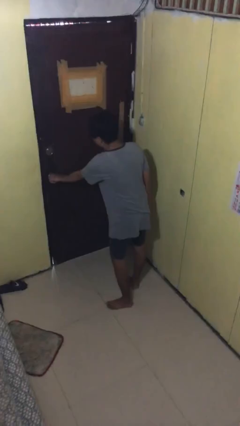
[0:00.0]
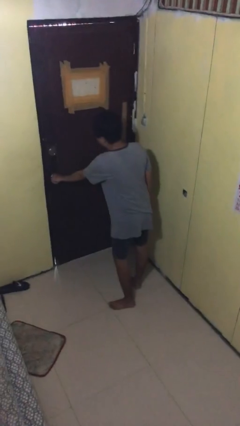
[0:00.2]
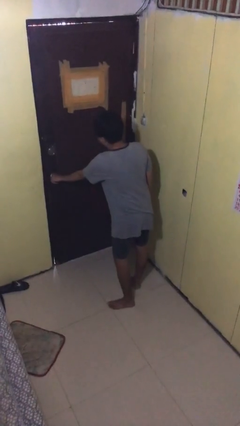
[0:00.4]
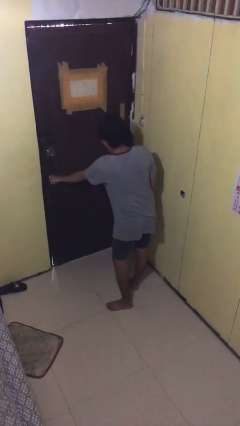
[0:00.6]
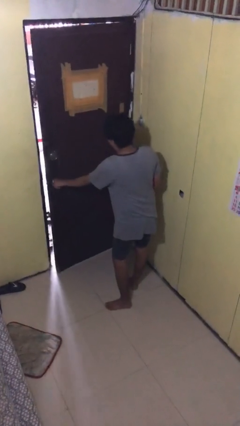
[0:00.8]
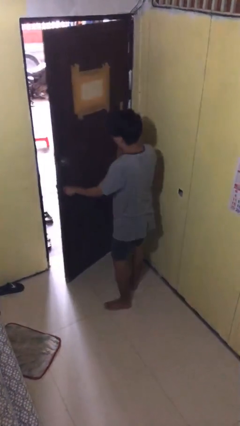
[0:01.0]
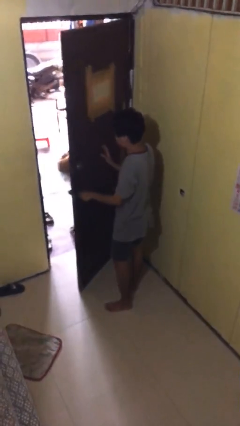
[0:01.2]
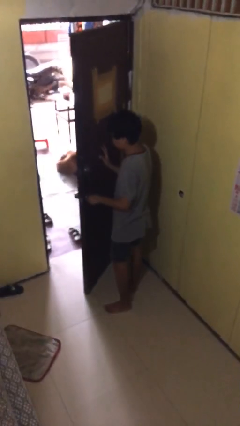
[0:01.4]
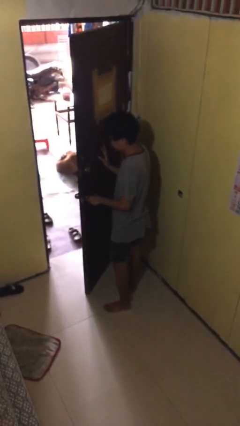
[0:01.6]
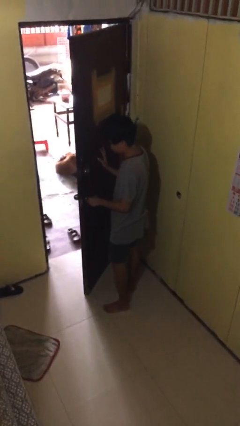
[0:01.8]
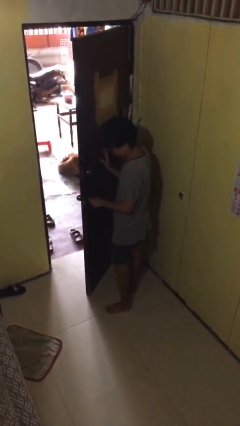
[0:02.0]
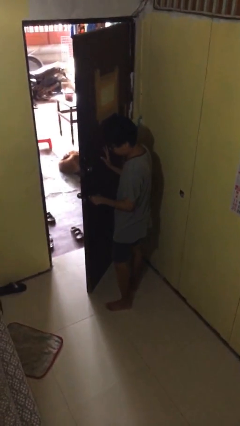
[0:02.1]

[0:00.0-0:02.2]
person opens facility door

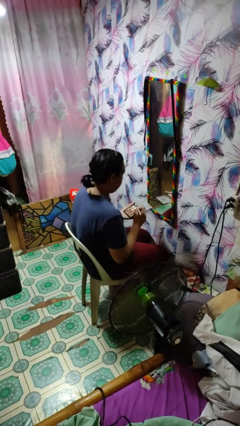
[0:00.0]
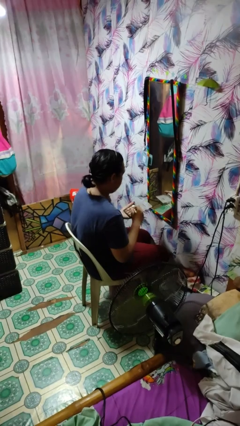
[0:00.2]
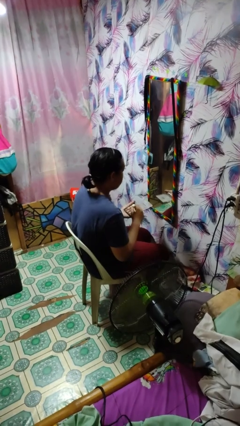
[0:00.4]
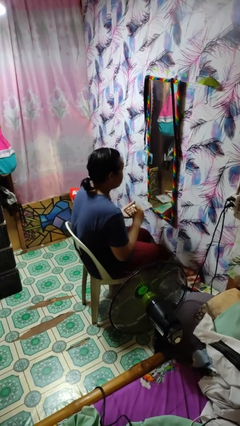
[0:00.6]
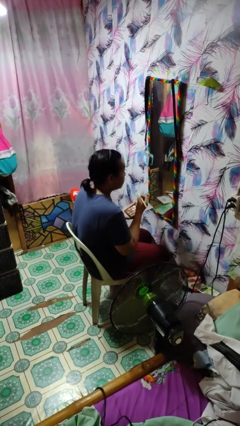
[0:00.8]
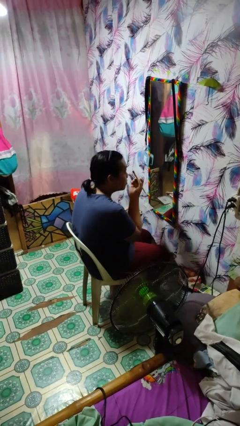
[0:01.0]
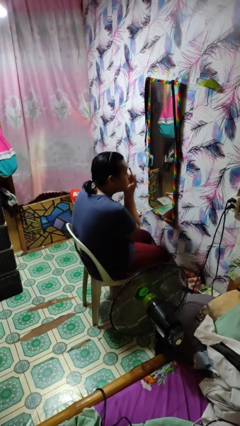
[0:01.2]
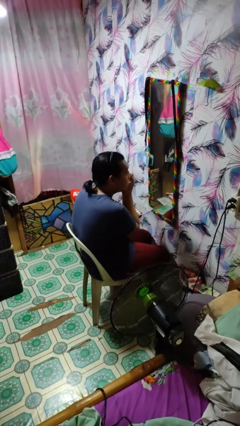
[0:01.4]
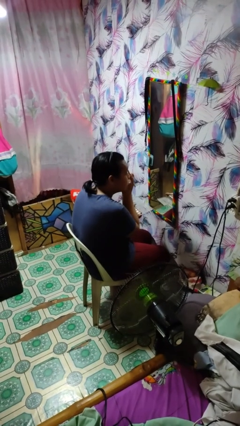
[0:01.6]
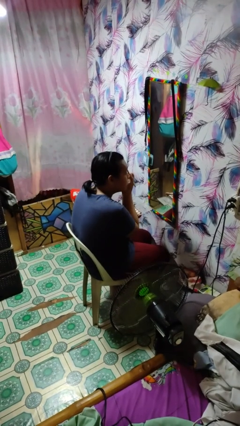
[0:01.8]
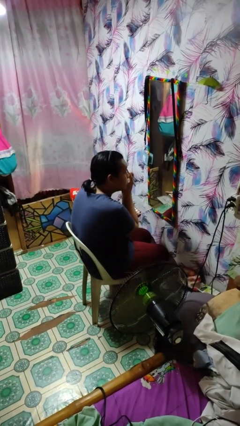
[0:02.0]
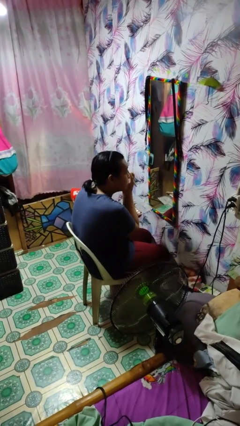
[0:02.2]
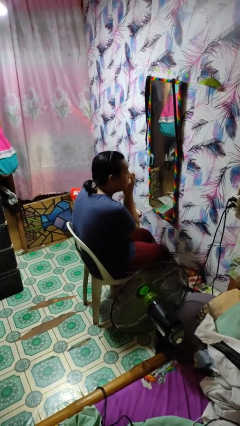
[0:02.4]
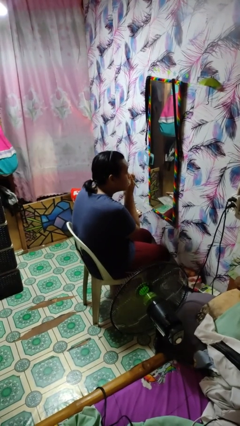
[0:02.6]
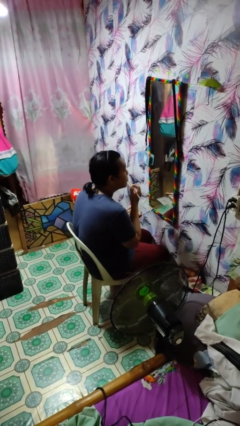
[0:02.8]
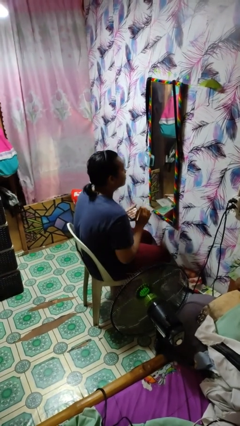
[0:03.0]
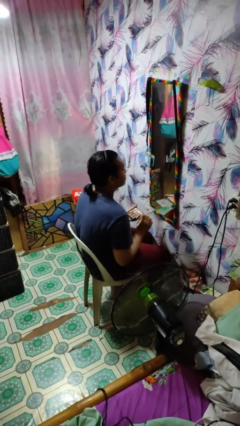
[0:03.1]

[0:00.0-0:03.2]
person applies eye makeup

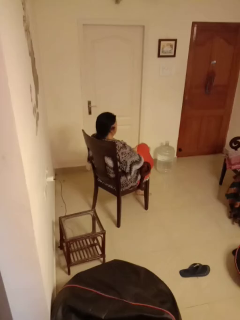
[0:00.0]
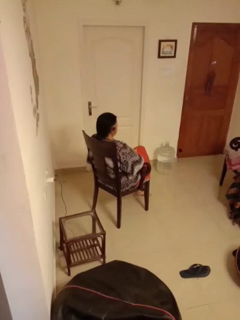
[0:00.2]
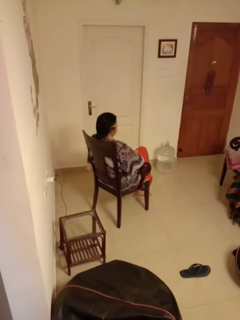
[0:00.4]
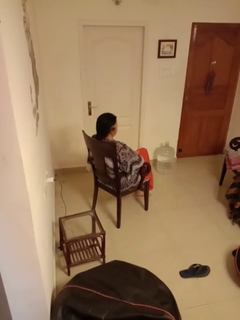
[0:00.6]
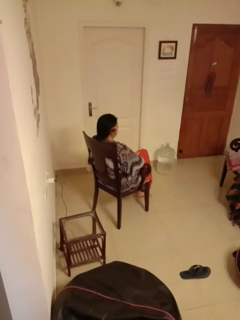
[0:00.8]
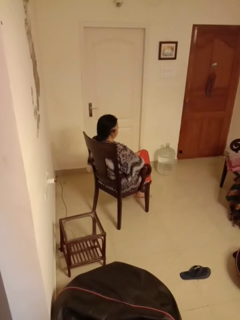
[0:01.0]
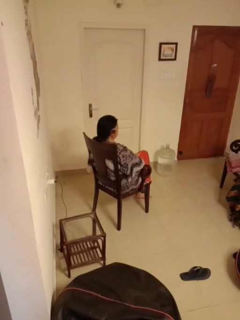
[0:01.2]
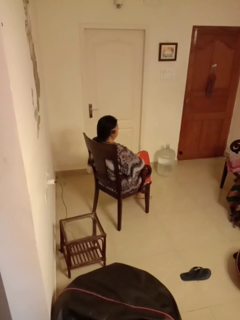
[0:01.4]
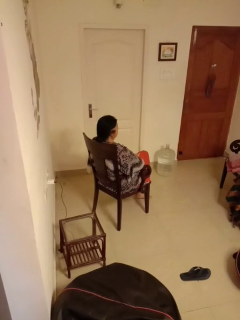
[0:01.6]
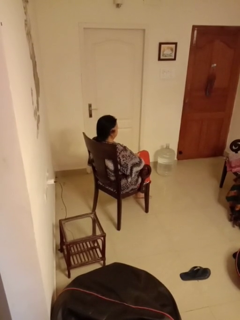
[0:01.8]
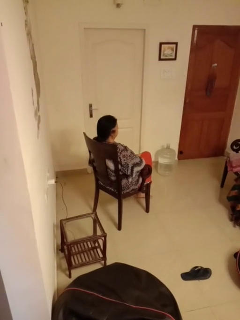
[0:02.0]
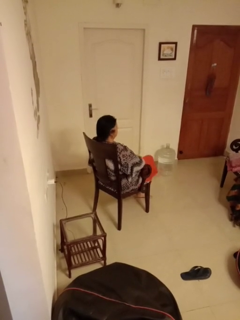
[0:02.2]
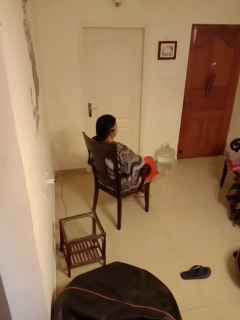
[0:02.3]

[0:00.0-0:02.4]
person crosses legs

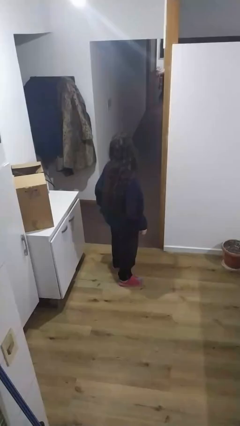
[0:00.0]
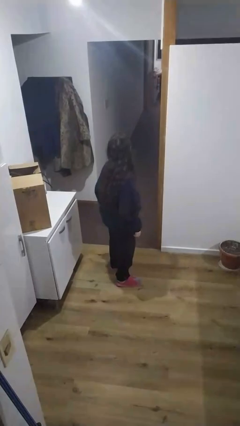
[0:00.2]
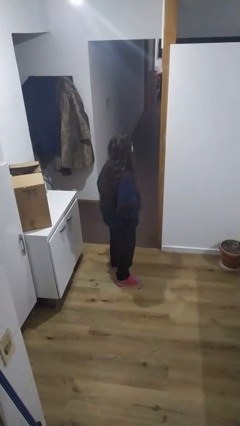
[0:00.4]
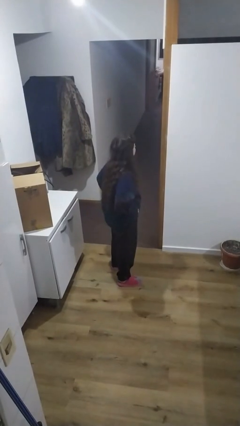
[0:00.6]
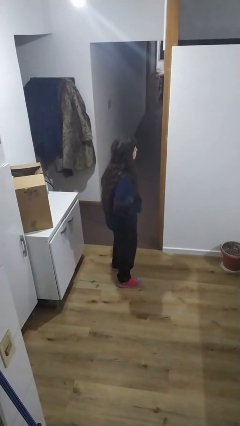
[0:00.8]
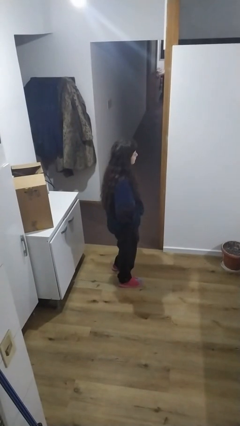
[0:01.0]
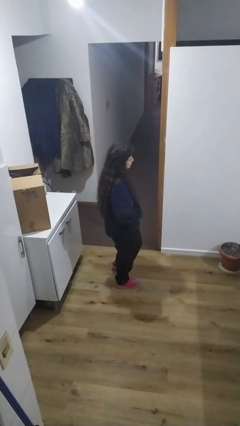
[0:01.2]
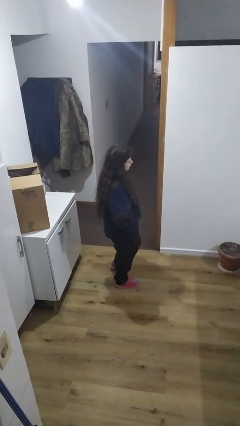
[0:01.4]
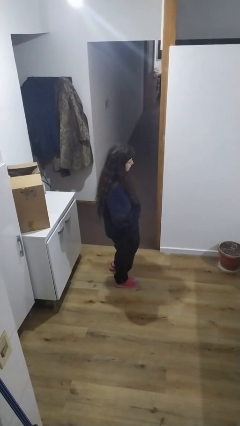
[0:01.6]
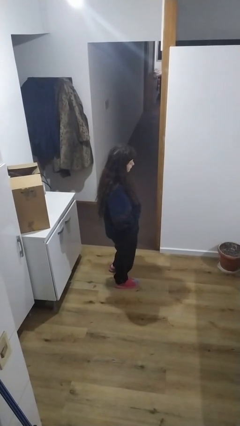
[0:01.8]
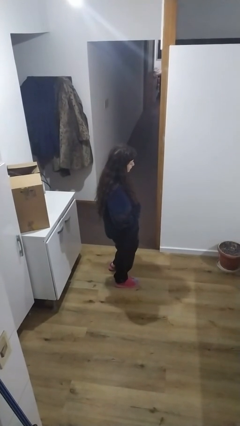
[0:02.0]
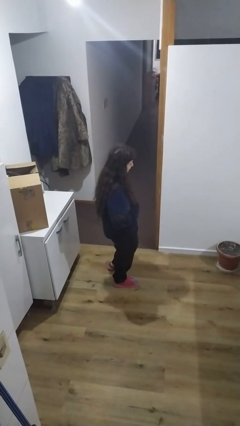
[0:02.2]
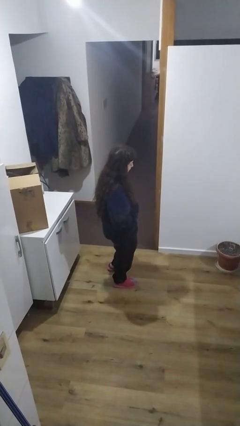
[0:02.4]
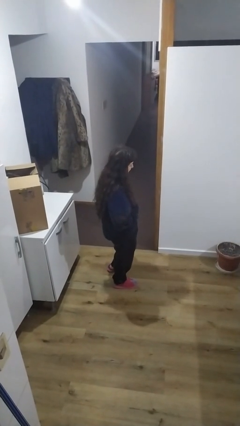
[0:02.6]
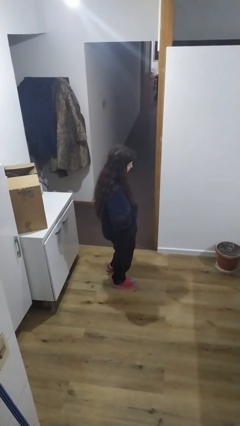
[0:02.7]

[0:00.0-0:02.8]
person puts hands in back pockets

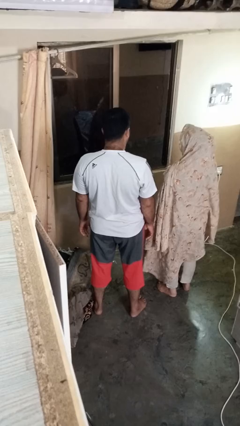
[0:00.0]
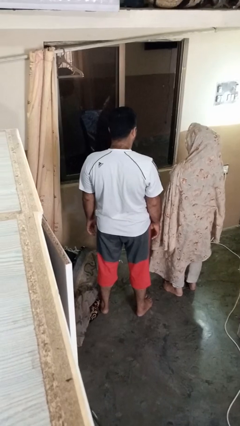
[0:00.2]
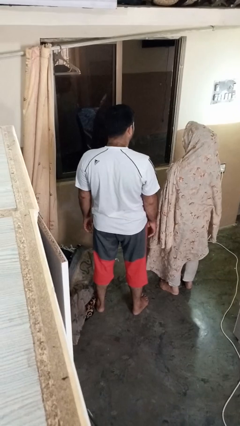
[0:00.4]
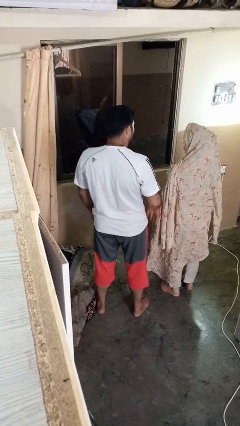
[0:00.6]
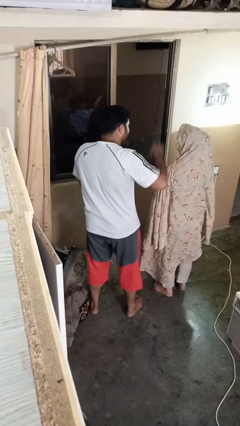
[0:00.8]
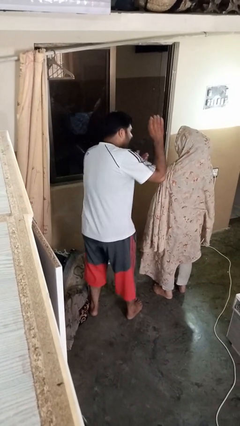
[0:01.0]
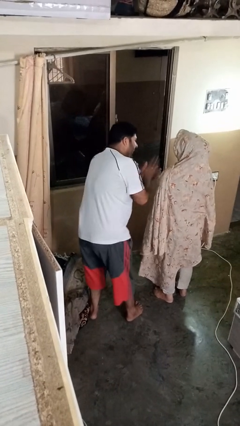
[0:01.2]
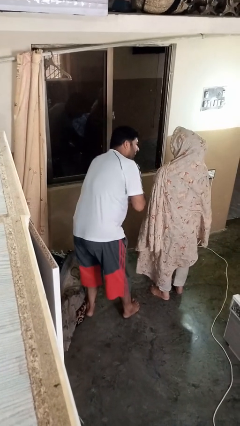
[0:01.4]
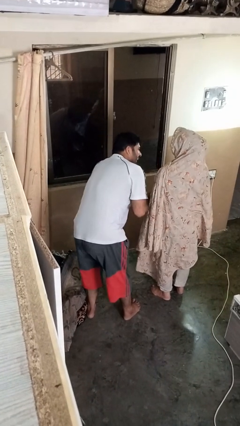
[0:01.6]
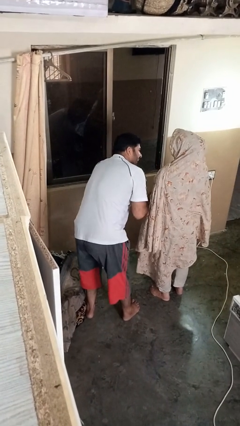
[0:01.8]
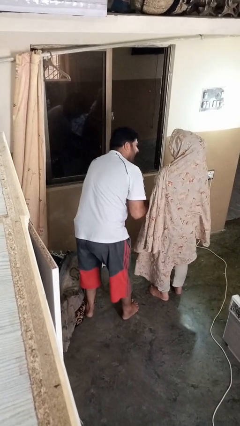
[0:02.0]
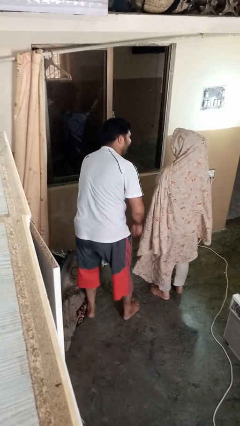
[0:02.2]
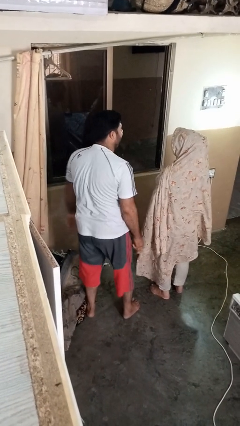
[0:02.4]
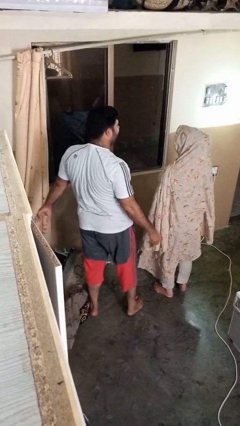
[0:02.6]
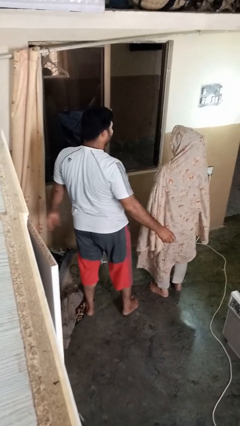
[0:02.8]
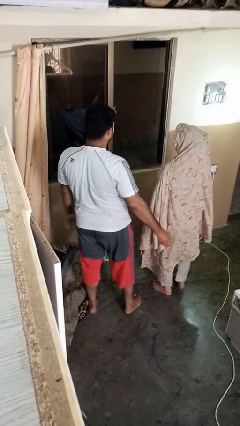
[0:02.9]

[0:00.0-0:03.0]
person laughs with person

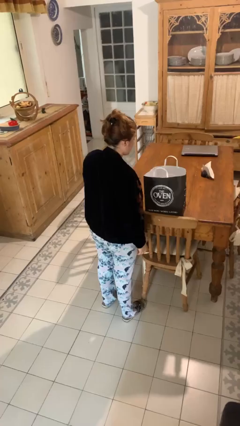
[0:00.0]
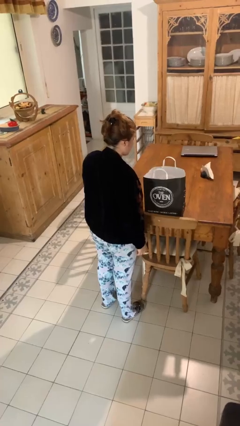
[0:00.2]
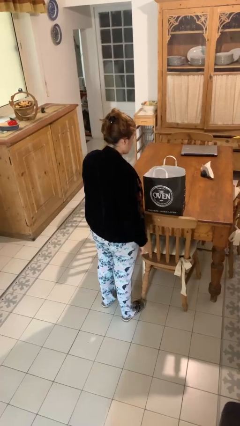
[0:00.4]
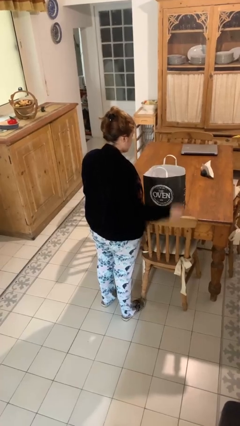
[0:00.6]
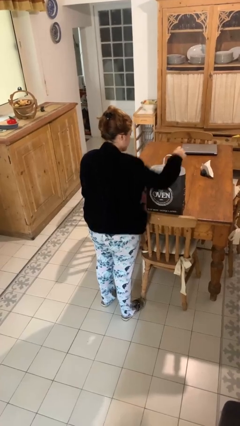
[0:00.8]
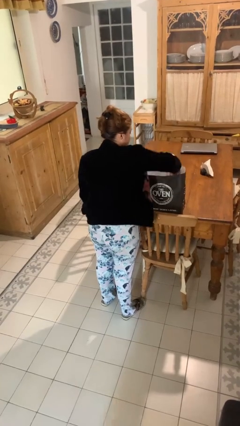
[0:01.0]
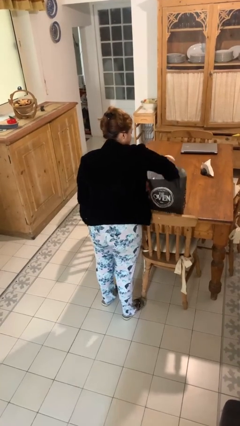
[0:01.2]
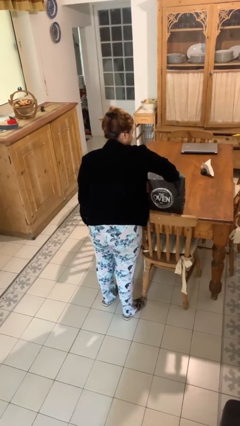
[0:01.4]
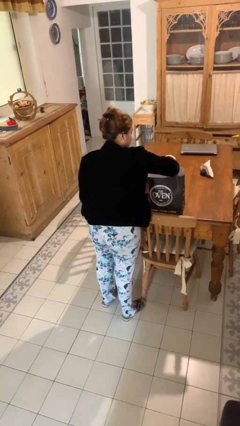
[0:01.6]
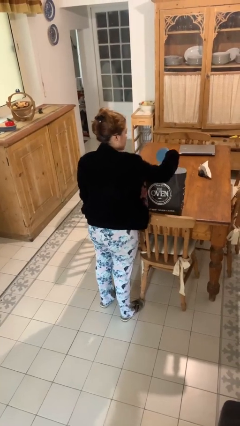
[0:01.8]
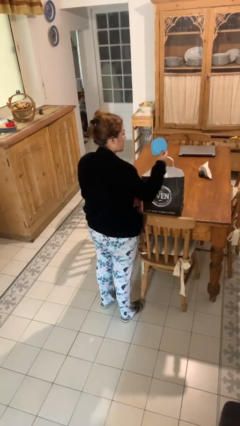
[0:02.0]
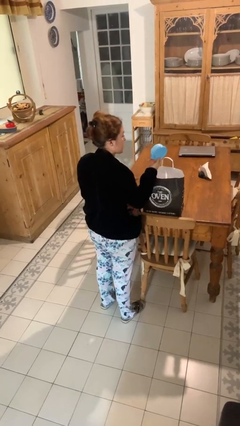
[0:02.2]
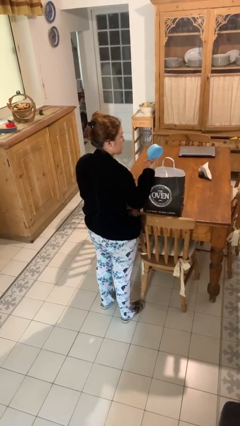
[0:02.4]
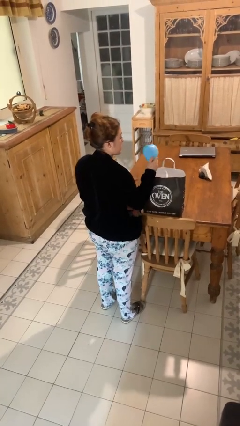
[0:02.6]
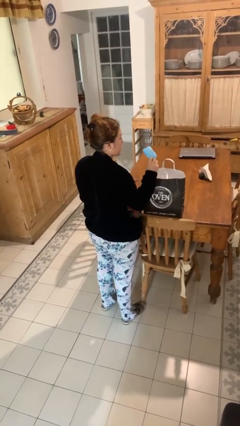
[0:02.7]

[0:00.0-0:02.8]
person takes object from bag

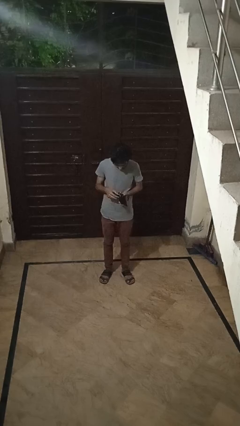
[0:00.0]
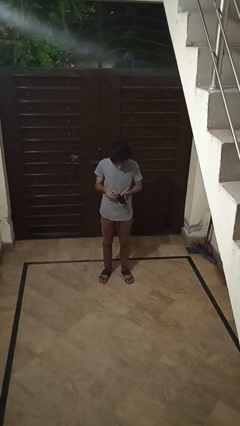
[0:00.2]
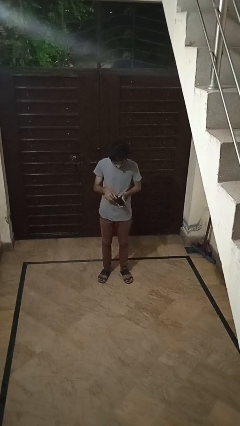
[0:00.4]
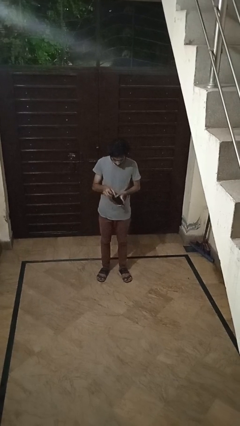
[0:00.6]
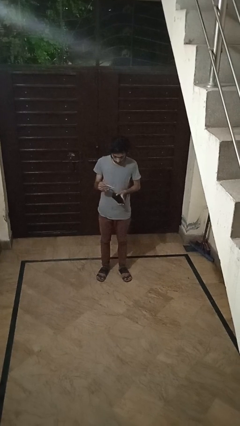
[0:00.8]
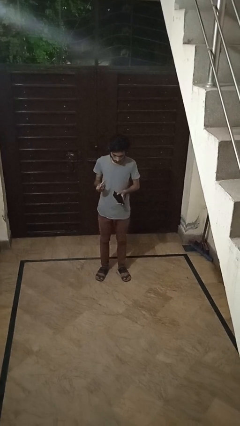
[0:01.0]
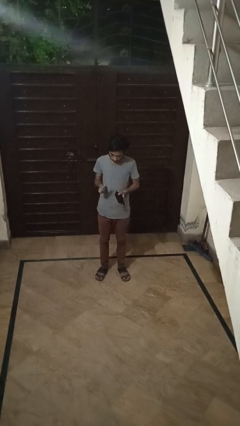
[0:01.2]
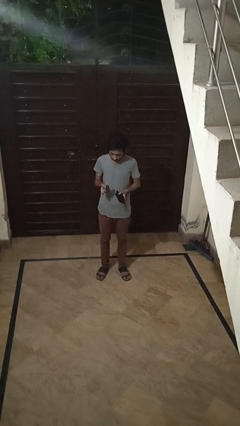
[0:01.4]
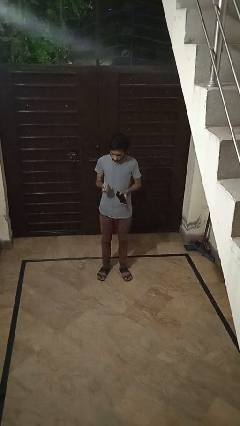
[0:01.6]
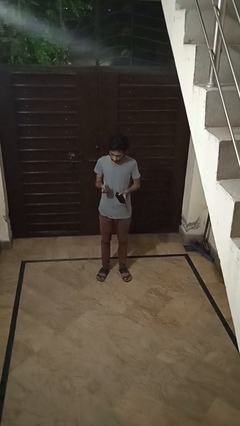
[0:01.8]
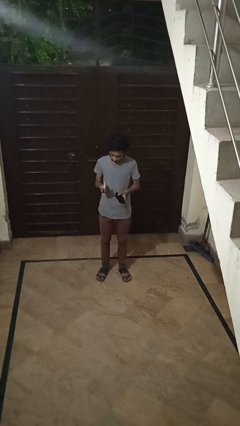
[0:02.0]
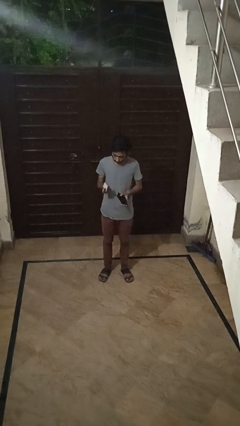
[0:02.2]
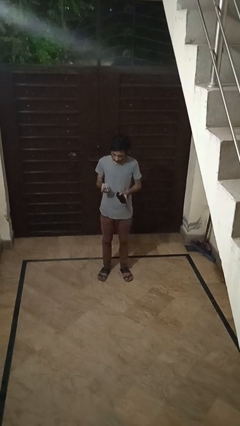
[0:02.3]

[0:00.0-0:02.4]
person takes object from purse
